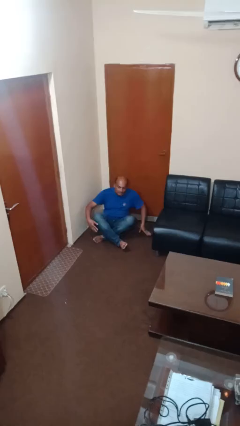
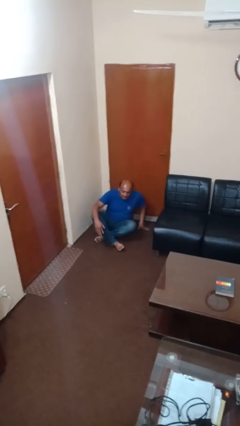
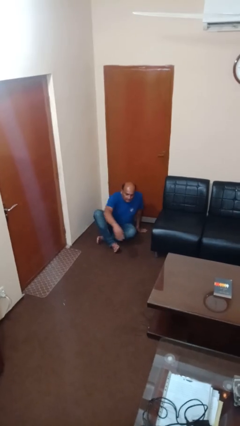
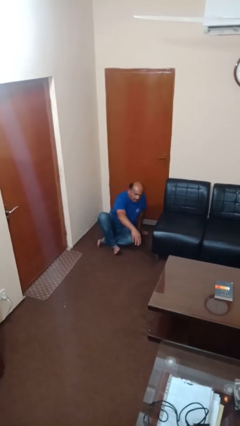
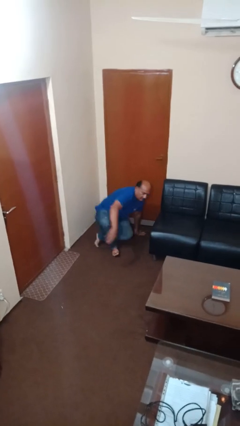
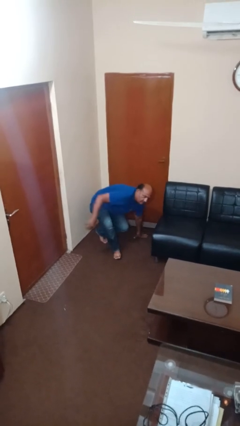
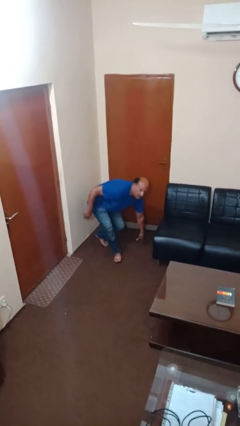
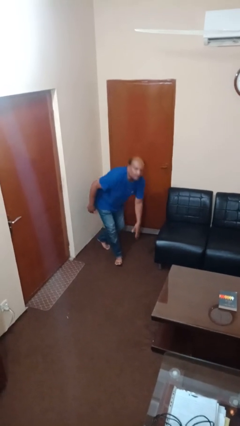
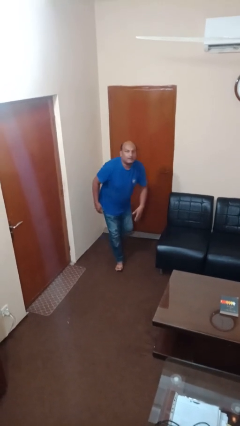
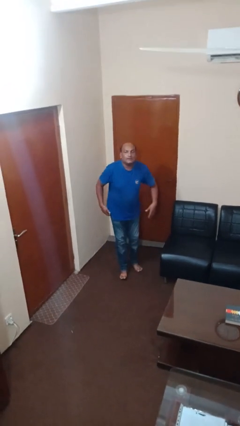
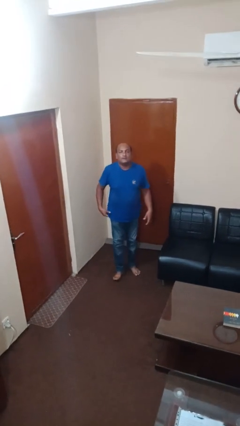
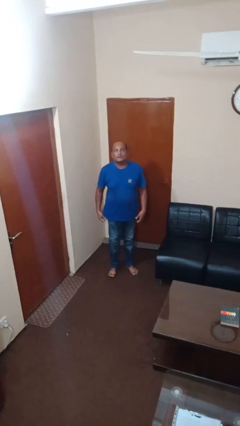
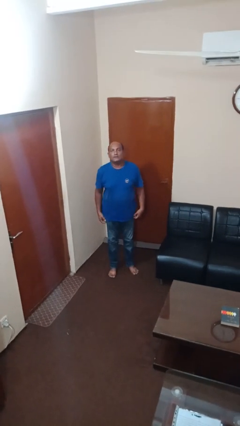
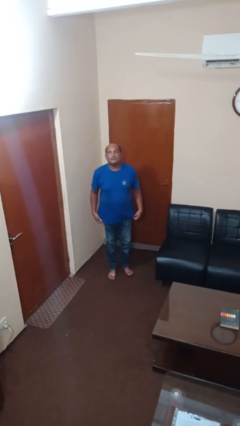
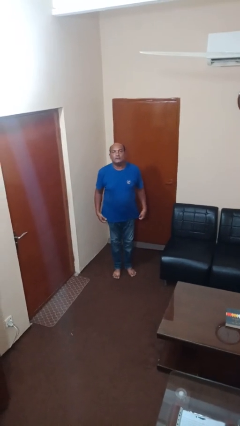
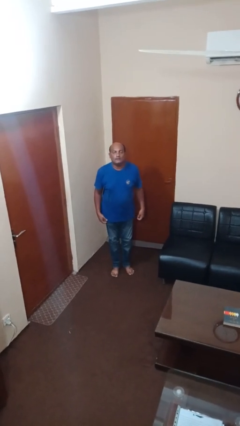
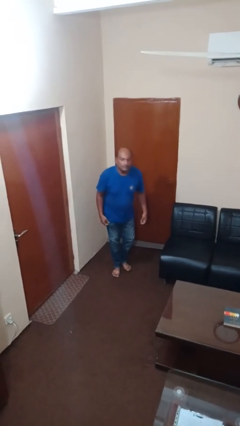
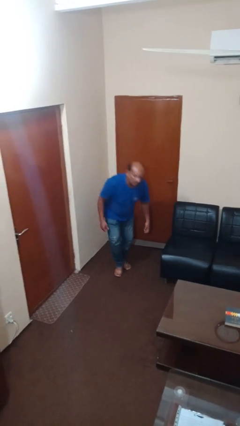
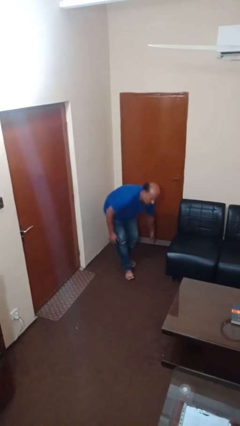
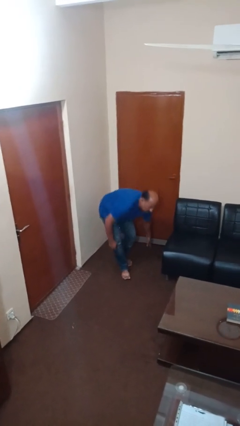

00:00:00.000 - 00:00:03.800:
person stands up from floor

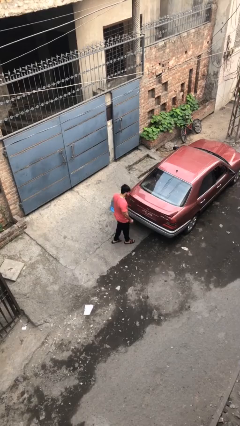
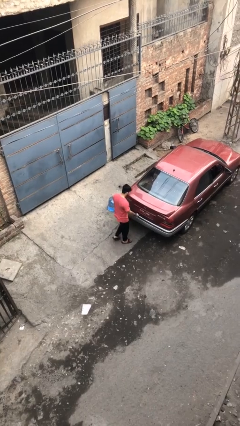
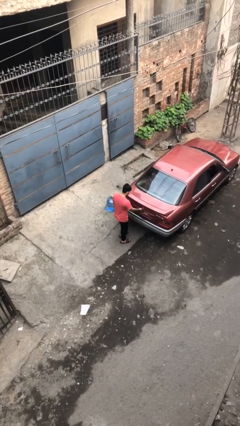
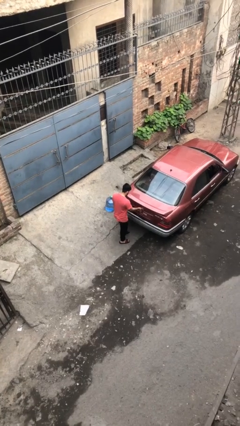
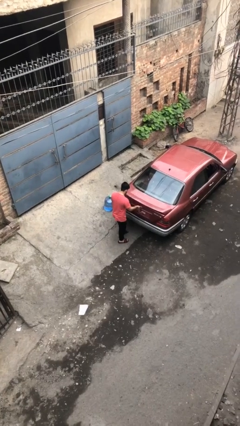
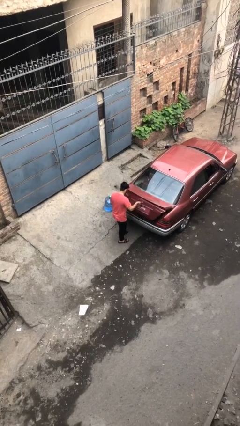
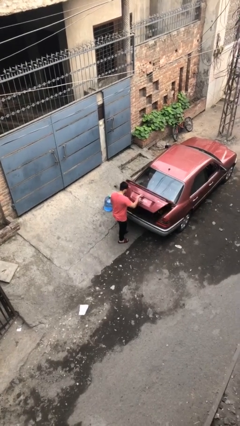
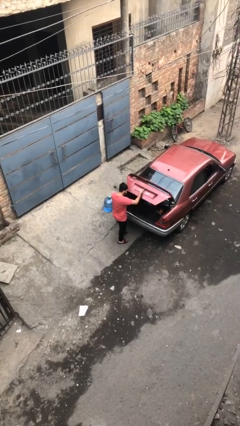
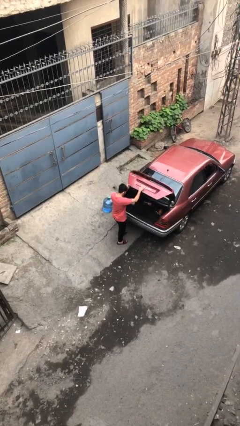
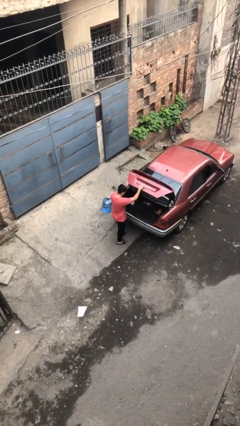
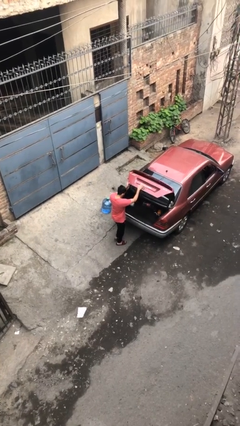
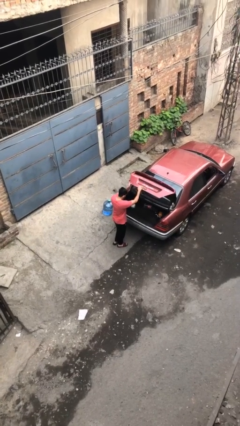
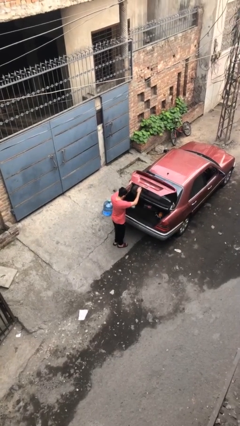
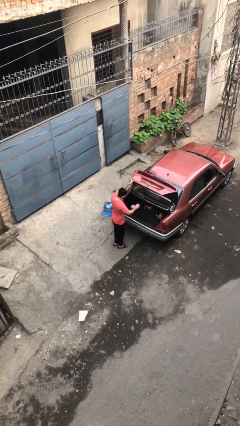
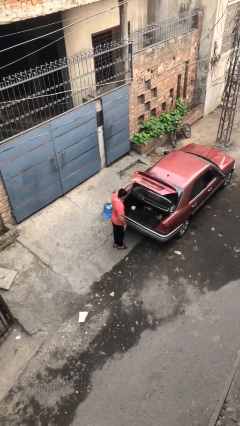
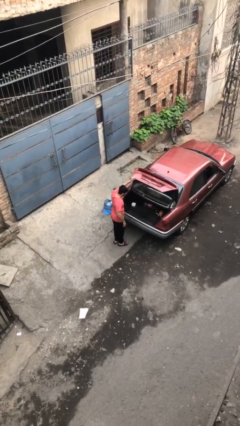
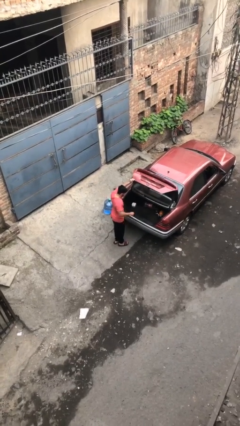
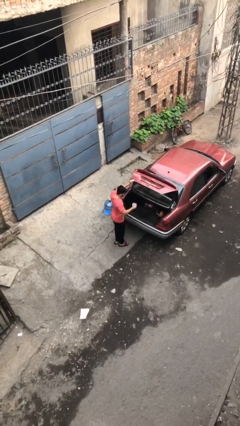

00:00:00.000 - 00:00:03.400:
person opens car trunk

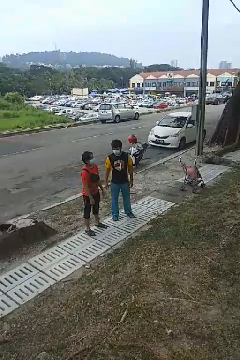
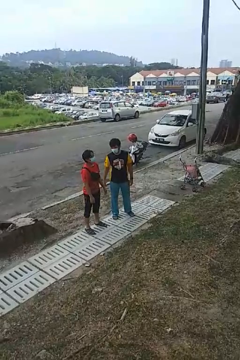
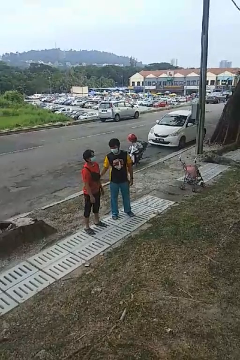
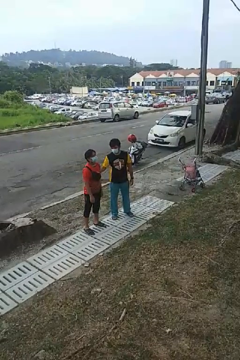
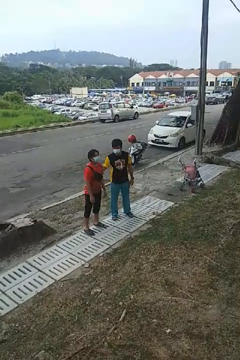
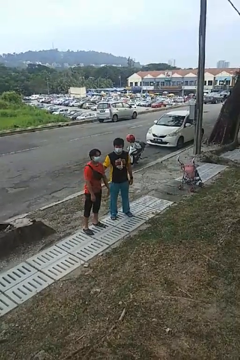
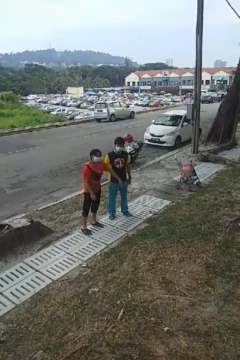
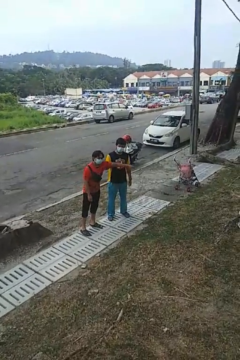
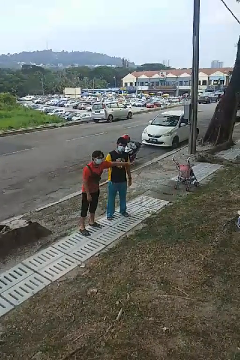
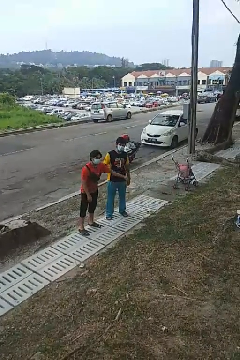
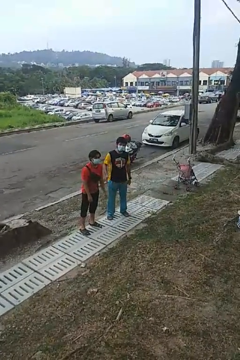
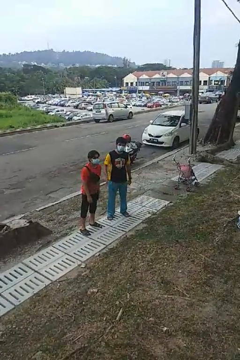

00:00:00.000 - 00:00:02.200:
person grabs person by bicep

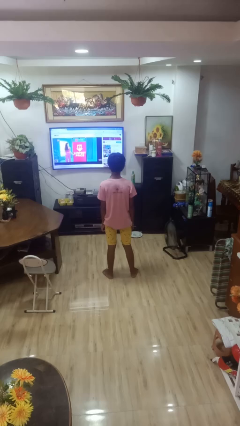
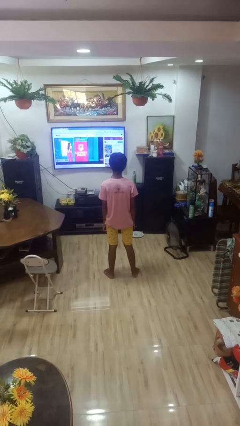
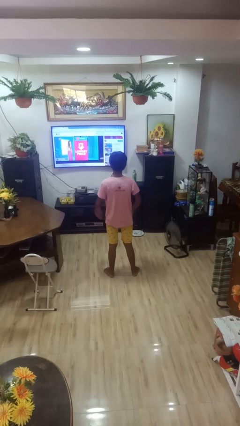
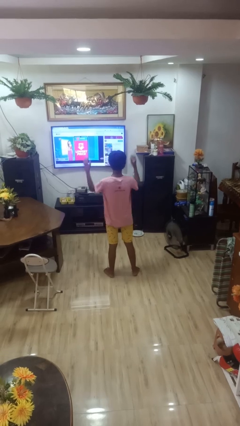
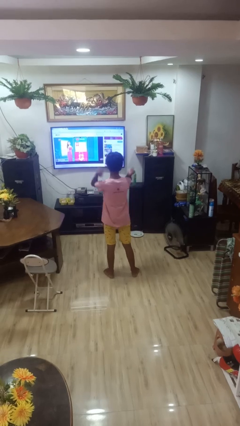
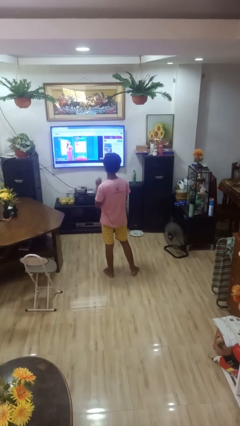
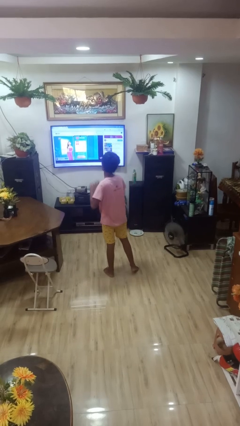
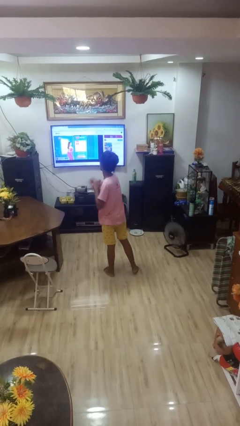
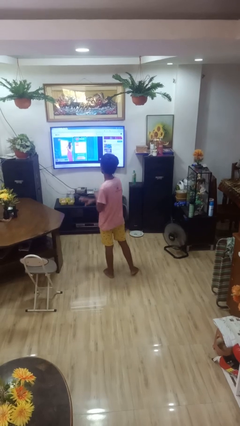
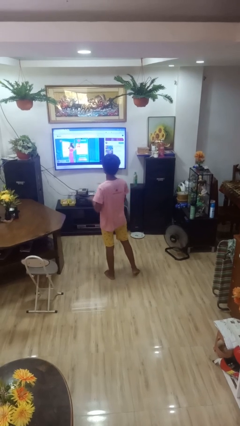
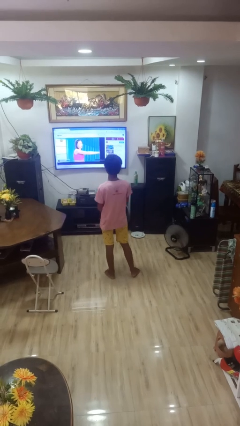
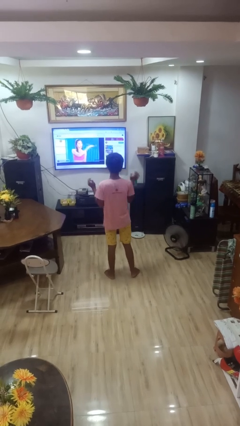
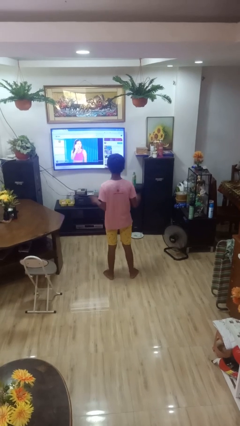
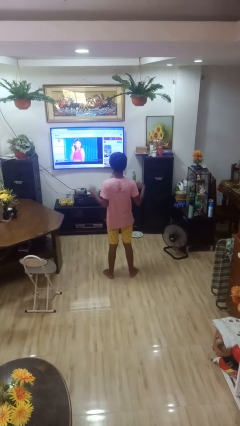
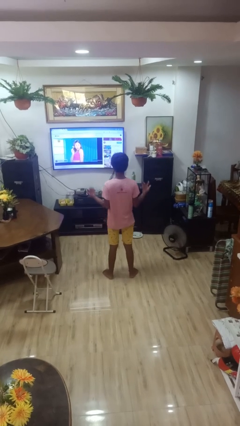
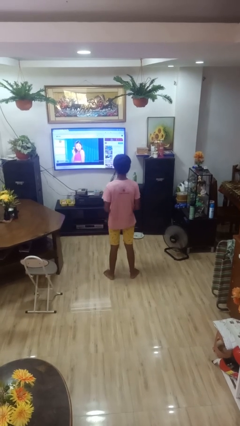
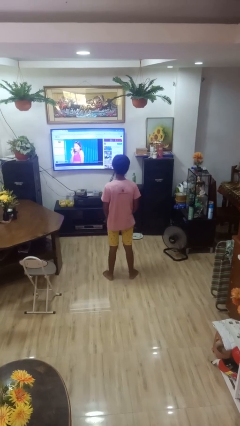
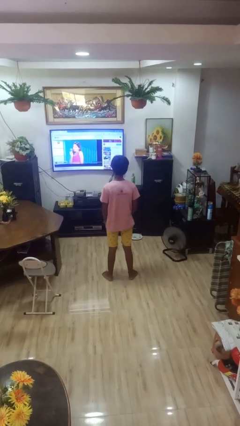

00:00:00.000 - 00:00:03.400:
person dances in place

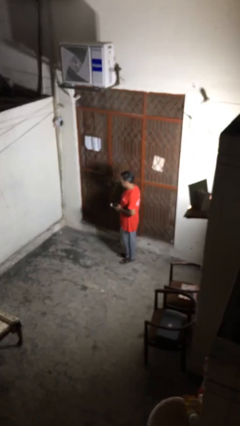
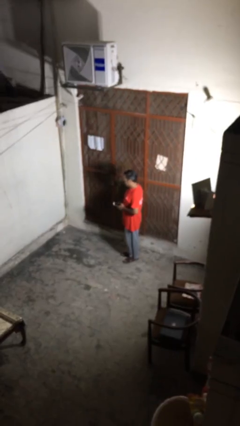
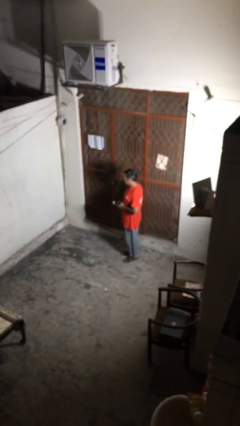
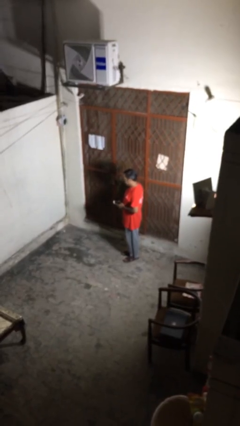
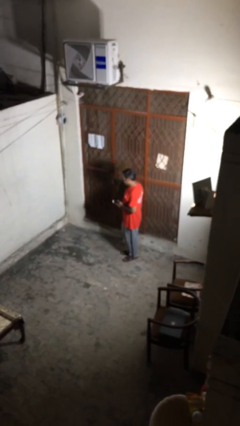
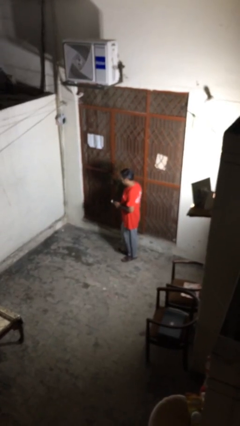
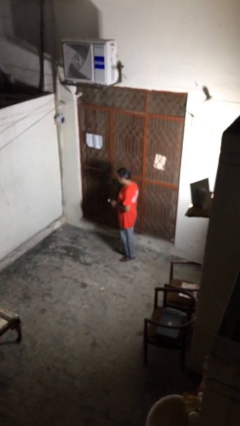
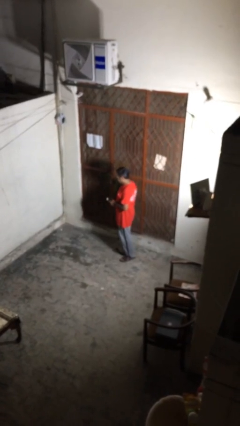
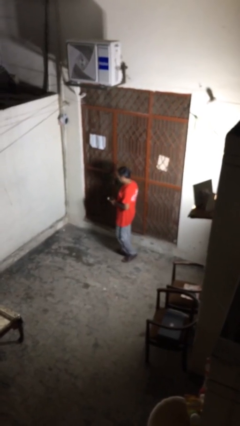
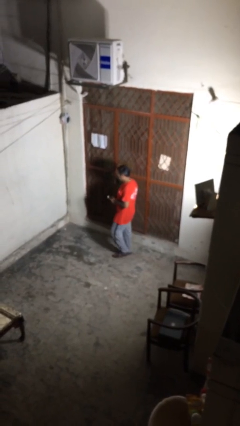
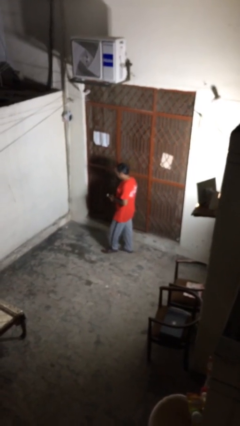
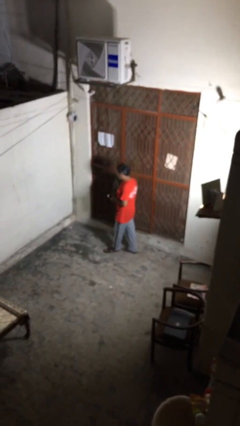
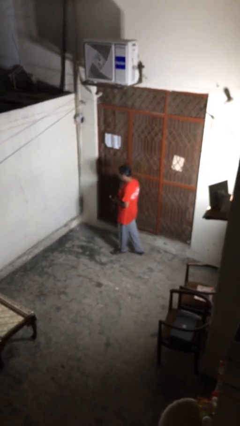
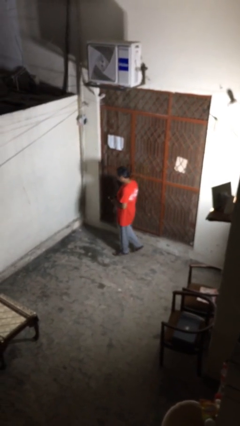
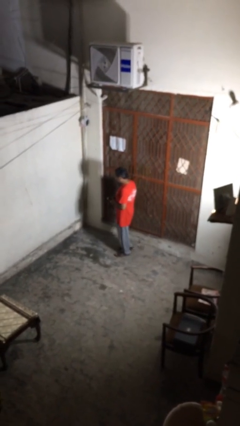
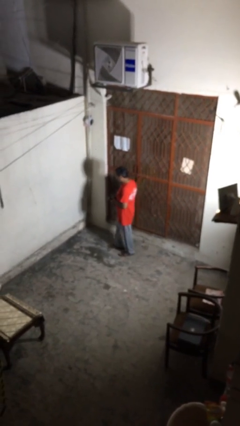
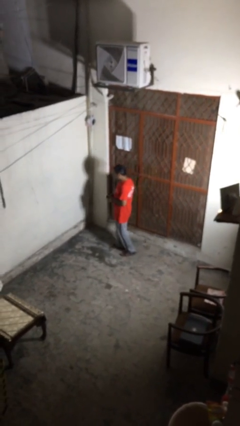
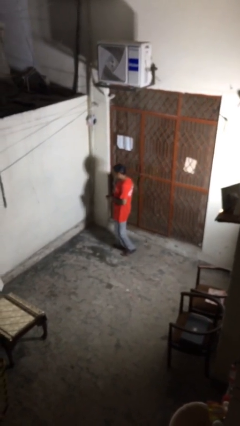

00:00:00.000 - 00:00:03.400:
person texts on phone

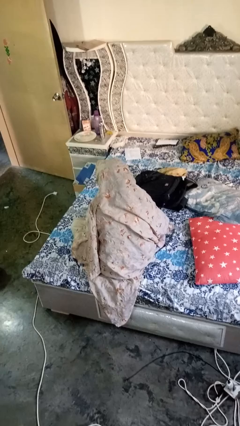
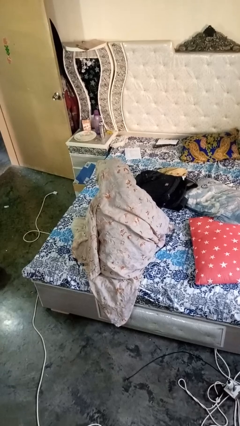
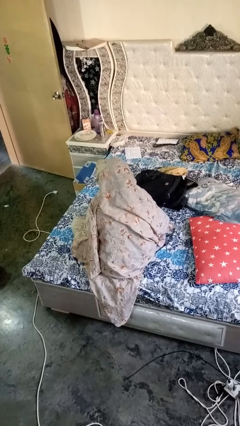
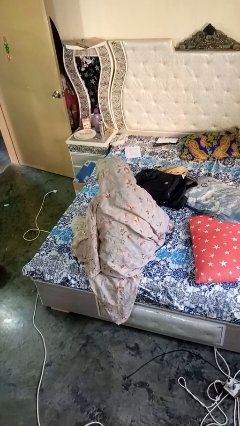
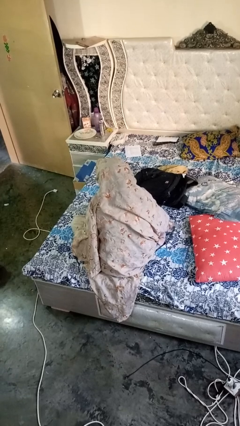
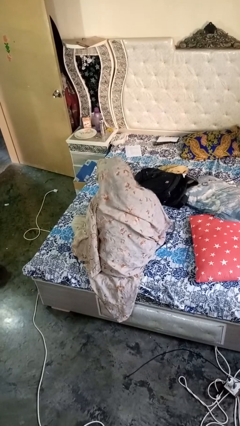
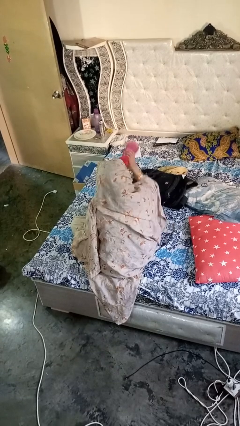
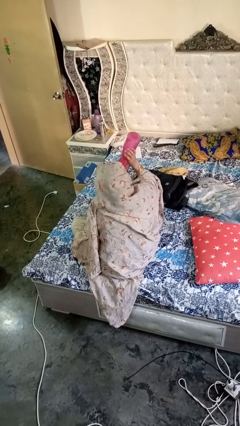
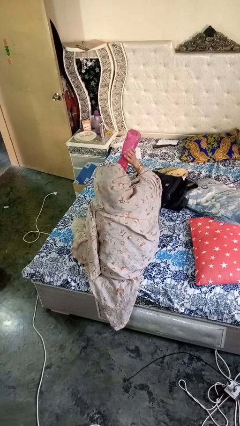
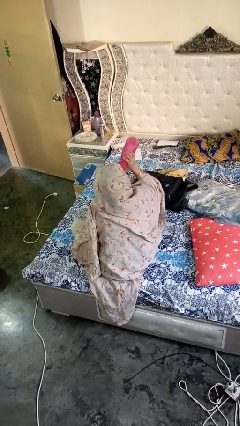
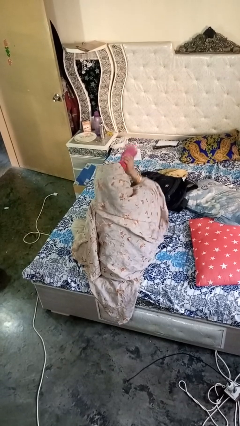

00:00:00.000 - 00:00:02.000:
person drinks from bottle
